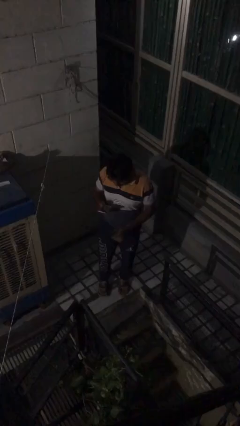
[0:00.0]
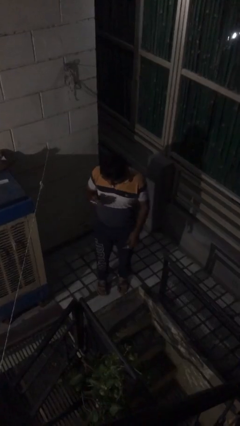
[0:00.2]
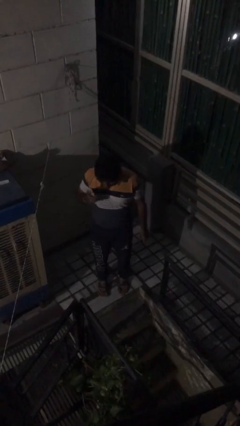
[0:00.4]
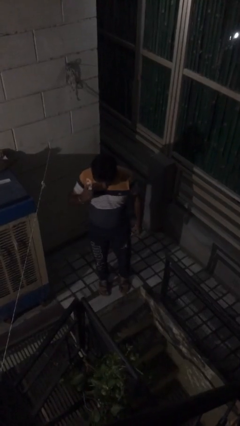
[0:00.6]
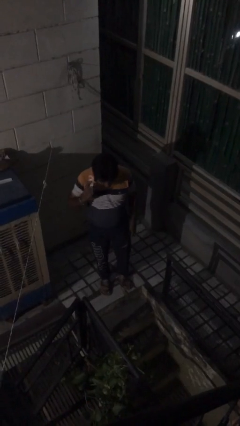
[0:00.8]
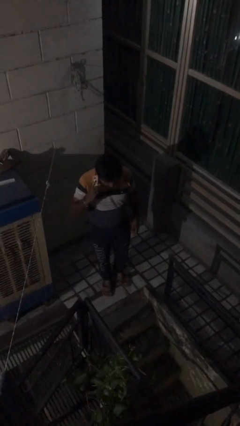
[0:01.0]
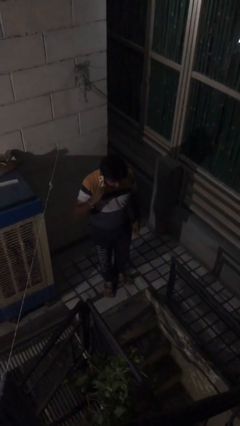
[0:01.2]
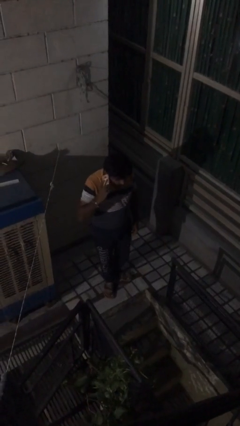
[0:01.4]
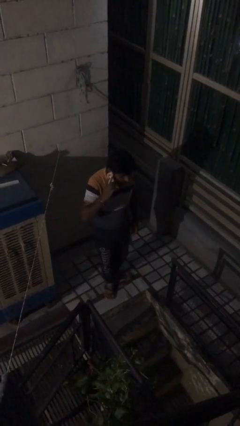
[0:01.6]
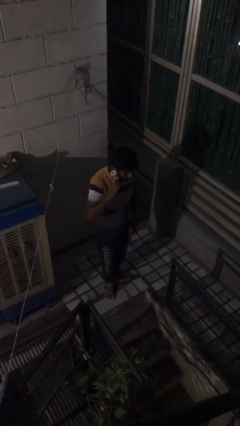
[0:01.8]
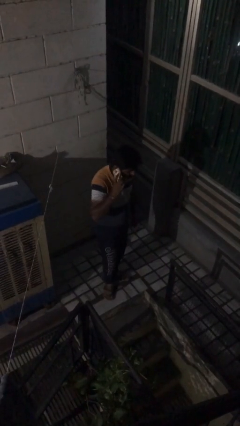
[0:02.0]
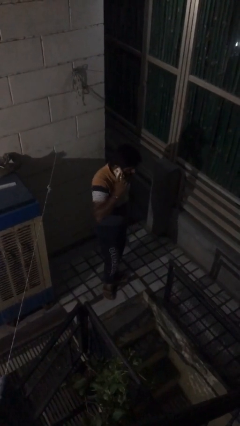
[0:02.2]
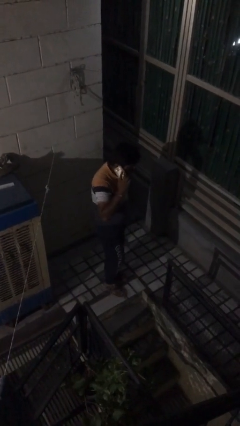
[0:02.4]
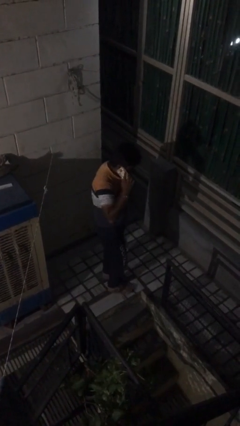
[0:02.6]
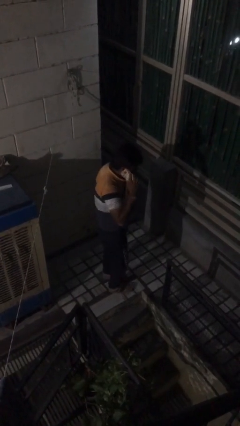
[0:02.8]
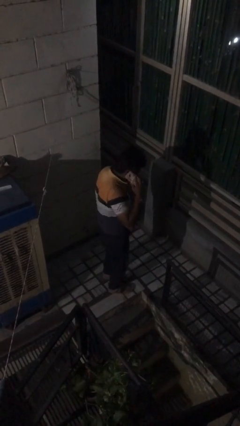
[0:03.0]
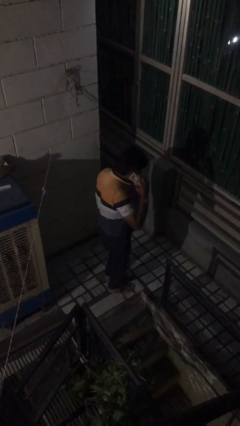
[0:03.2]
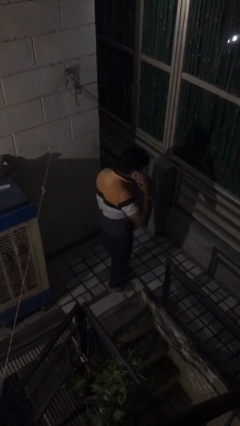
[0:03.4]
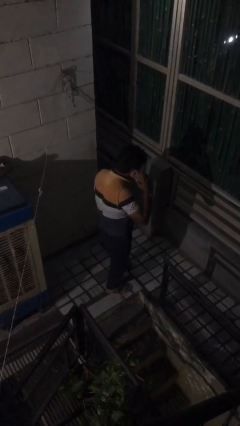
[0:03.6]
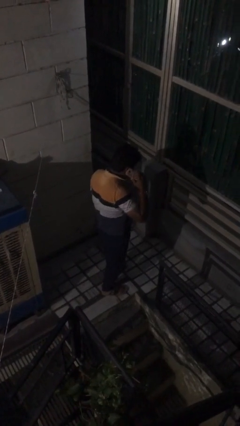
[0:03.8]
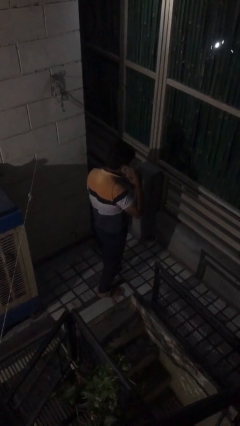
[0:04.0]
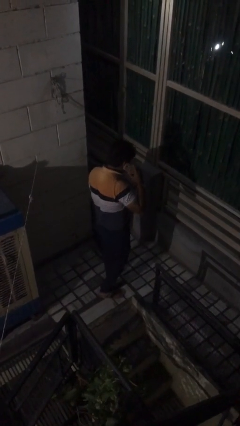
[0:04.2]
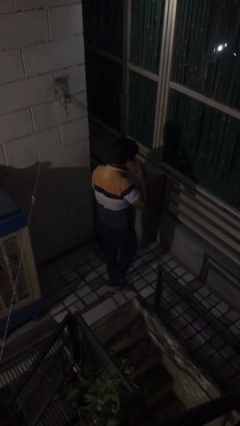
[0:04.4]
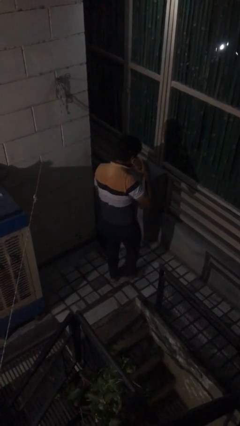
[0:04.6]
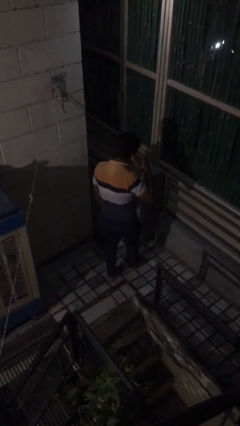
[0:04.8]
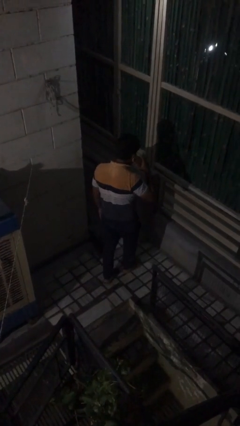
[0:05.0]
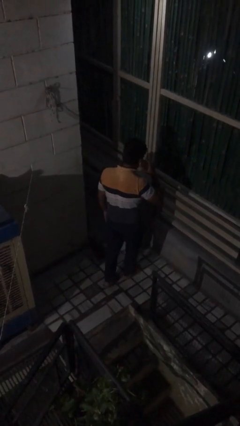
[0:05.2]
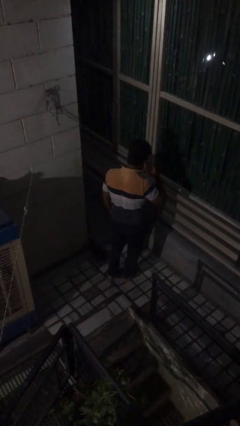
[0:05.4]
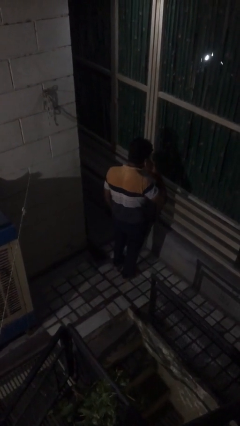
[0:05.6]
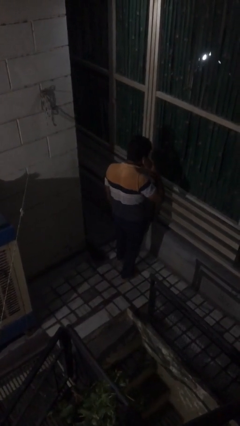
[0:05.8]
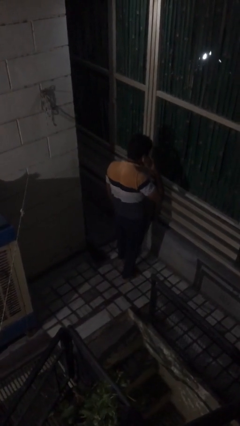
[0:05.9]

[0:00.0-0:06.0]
person talks on phone

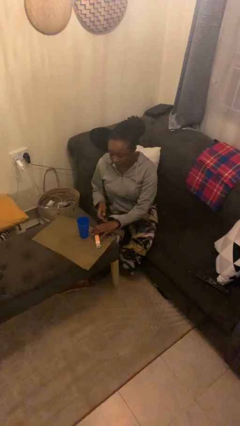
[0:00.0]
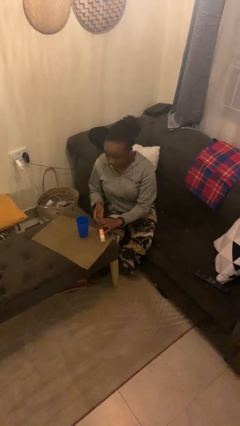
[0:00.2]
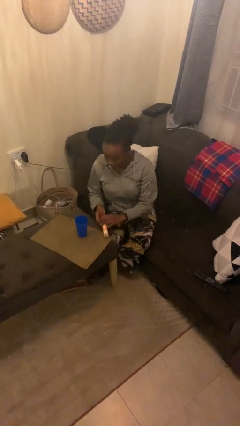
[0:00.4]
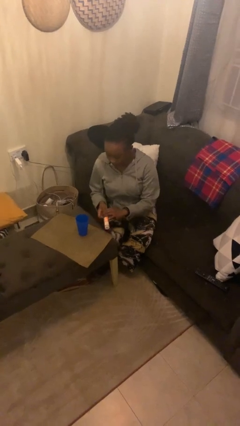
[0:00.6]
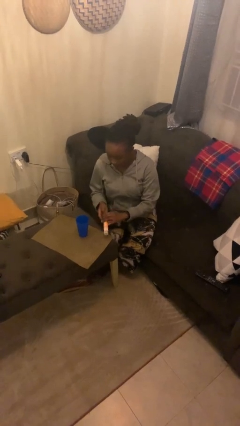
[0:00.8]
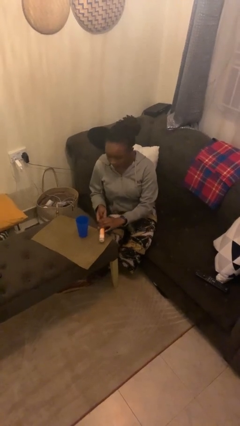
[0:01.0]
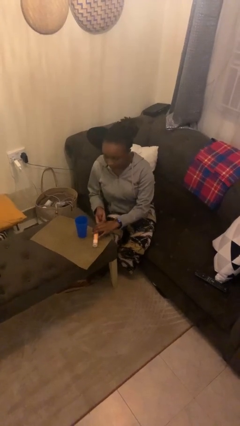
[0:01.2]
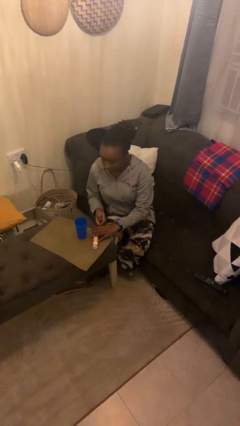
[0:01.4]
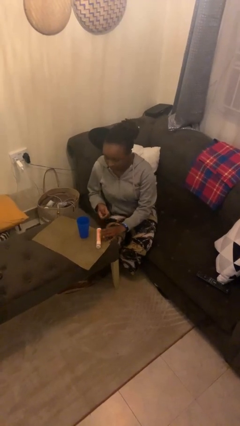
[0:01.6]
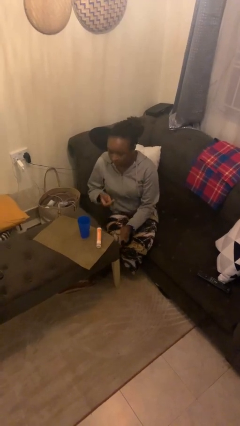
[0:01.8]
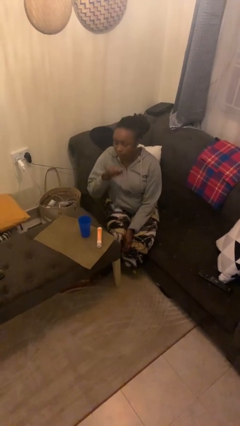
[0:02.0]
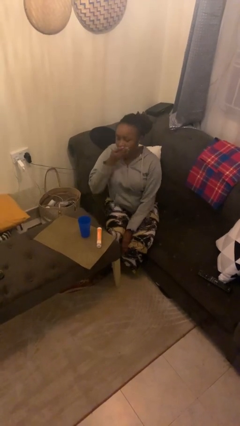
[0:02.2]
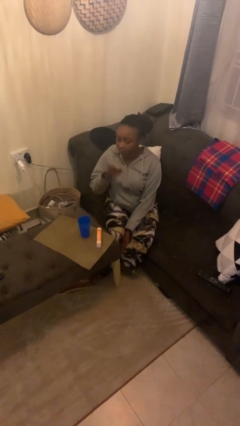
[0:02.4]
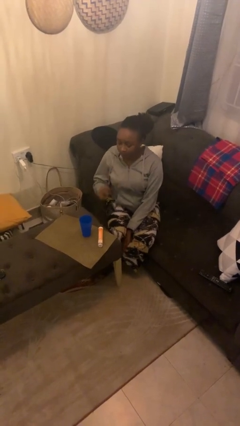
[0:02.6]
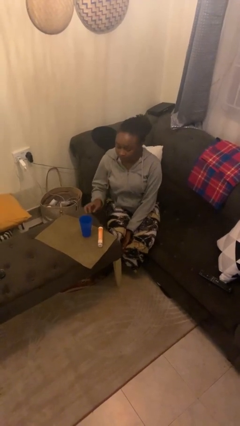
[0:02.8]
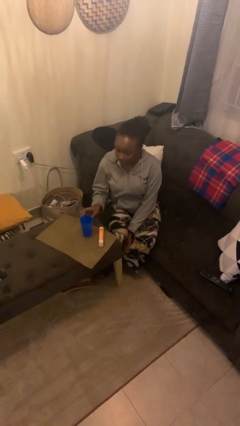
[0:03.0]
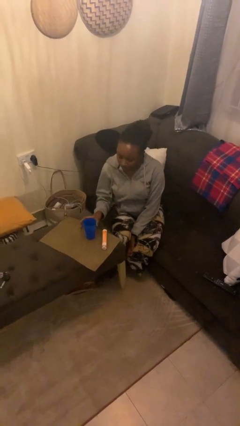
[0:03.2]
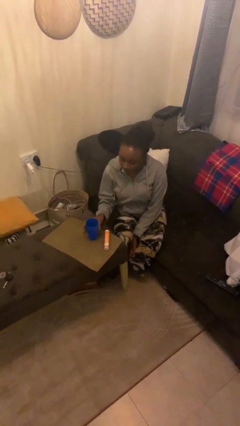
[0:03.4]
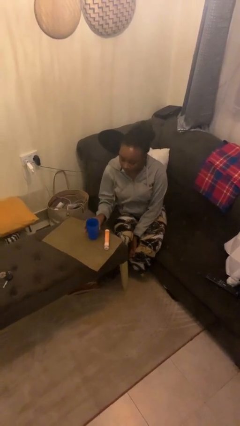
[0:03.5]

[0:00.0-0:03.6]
person takes medicine pills

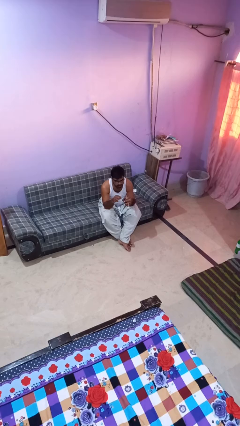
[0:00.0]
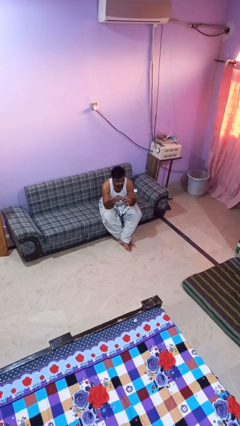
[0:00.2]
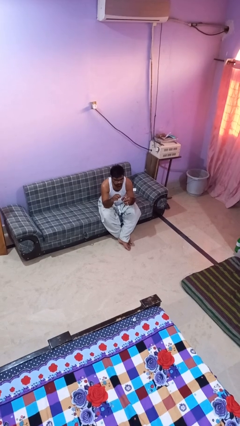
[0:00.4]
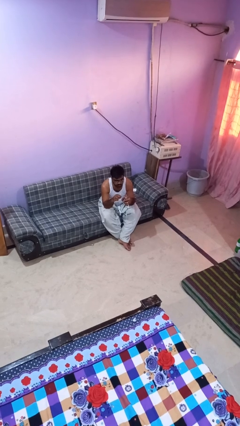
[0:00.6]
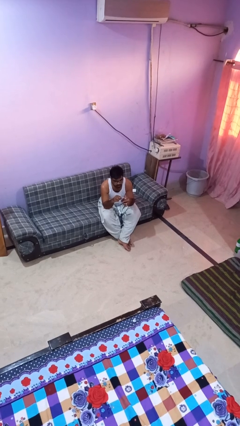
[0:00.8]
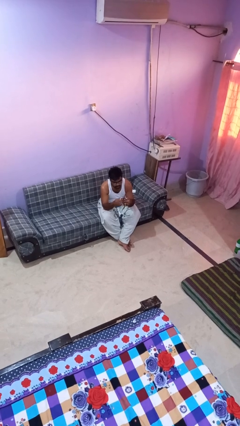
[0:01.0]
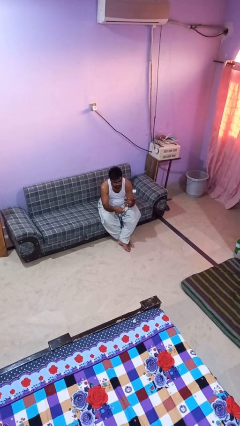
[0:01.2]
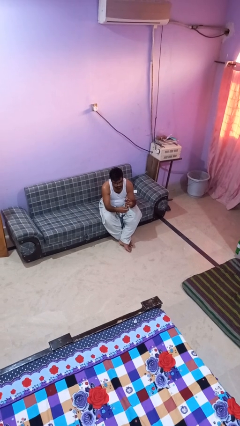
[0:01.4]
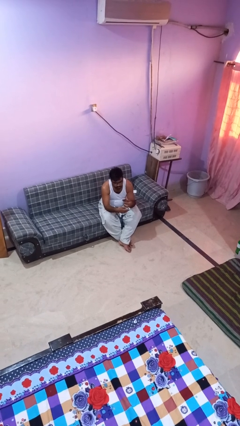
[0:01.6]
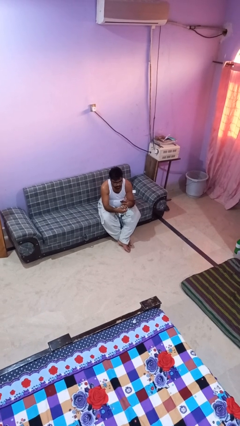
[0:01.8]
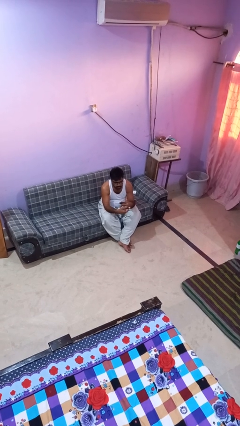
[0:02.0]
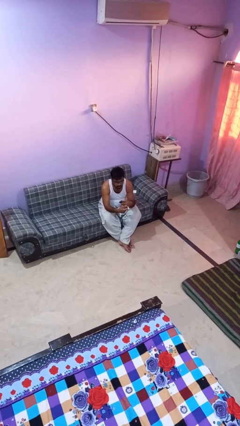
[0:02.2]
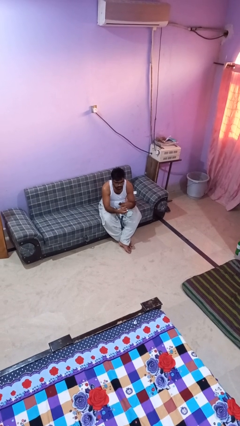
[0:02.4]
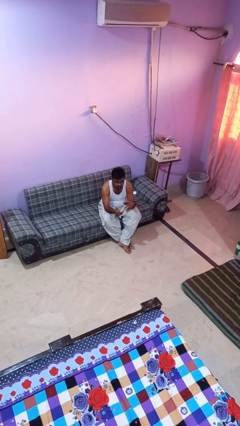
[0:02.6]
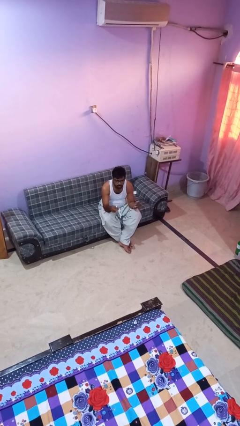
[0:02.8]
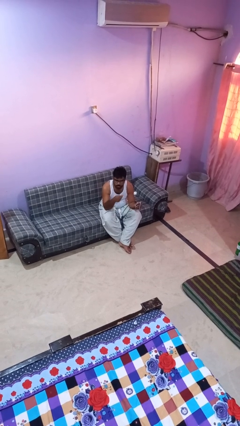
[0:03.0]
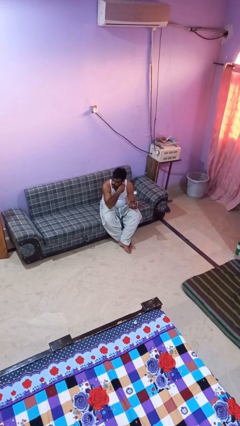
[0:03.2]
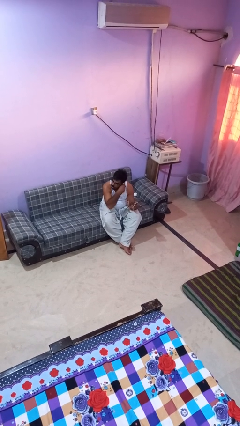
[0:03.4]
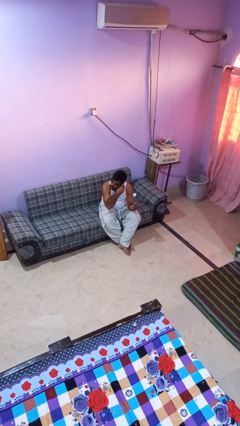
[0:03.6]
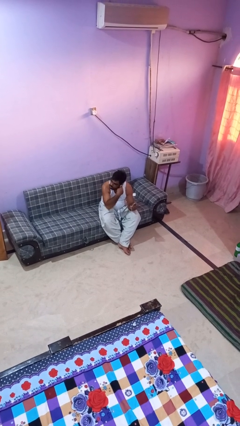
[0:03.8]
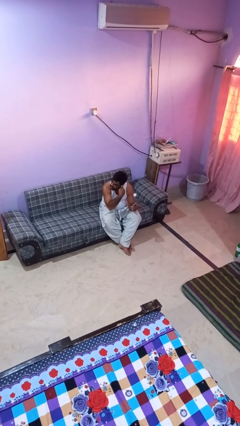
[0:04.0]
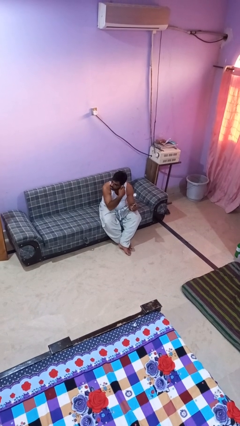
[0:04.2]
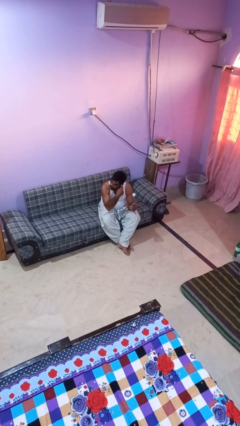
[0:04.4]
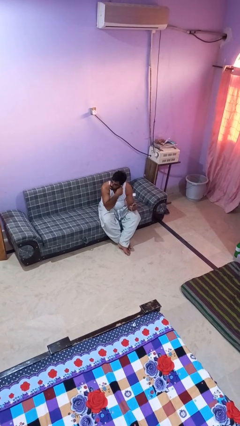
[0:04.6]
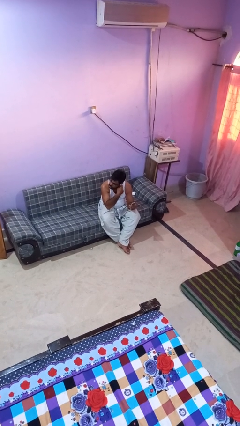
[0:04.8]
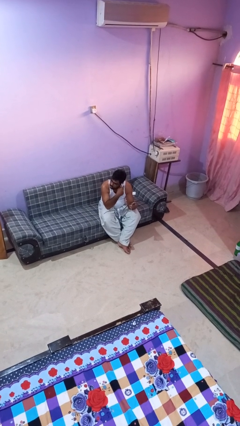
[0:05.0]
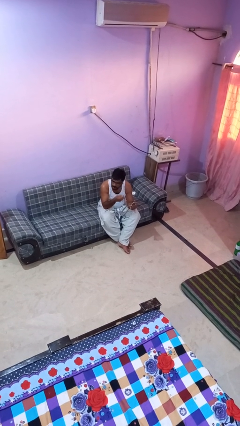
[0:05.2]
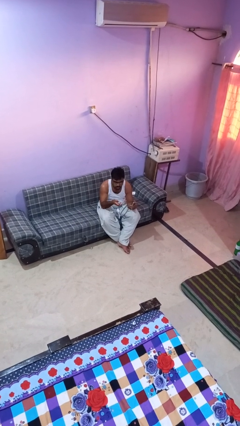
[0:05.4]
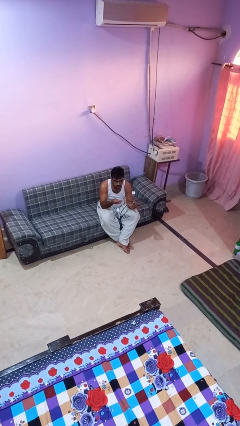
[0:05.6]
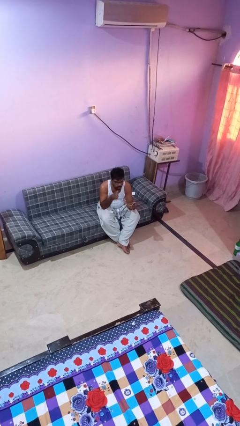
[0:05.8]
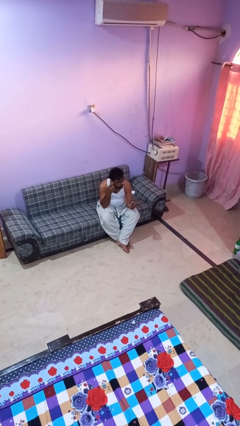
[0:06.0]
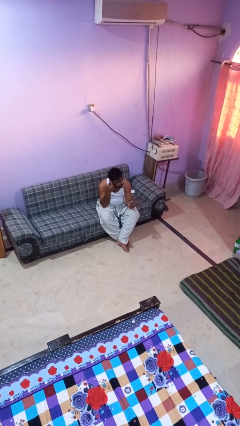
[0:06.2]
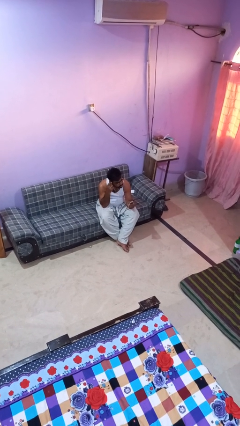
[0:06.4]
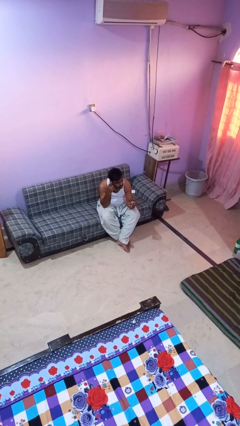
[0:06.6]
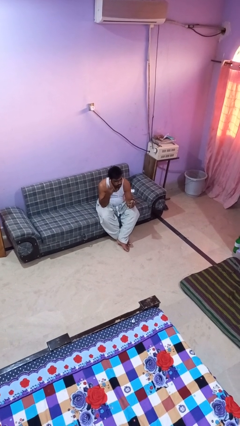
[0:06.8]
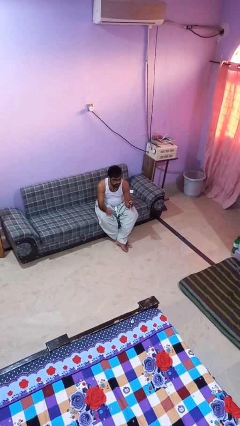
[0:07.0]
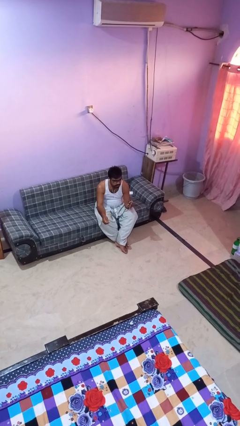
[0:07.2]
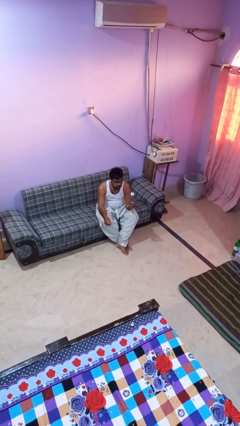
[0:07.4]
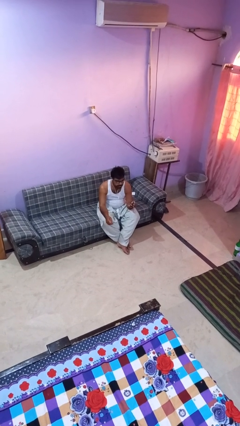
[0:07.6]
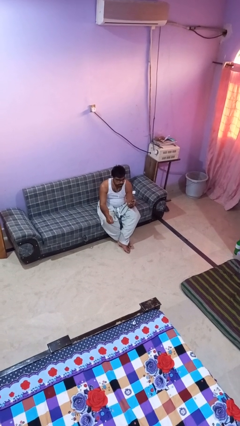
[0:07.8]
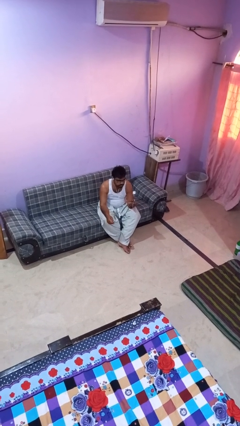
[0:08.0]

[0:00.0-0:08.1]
person puts on headphones

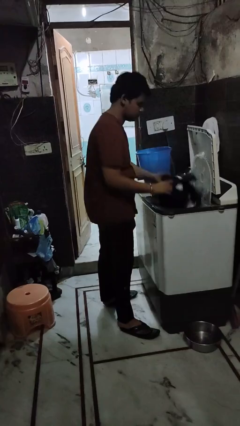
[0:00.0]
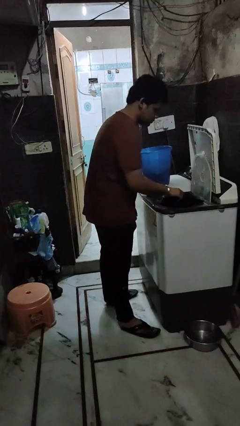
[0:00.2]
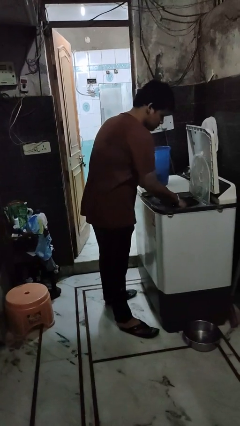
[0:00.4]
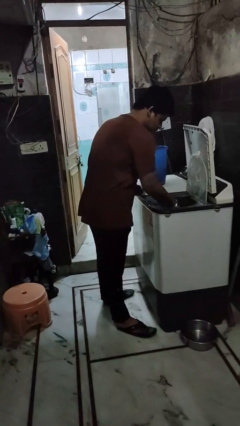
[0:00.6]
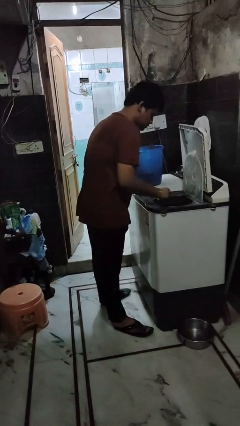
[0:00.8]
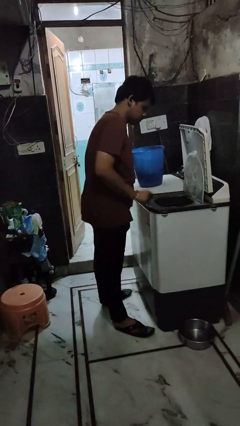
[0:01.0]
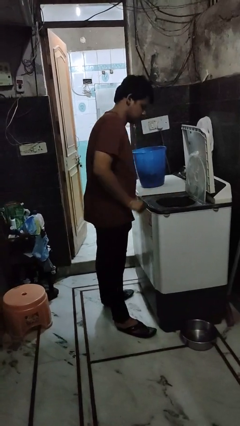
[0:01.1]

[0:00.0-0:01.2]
person loads dryer
